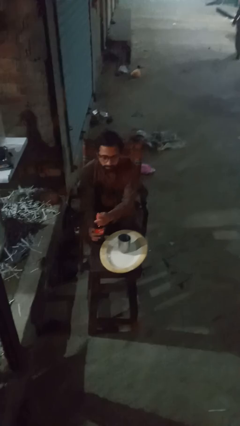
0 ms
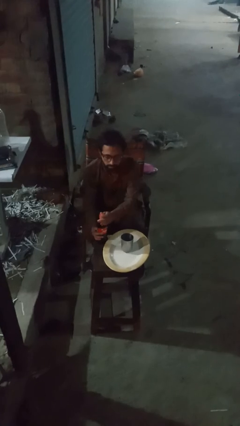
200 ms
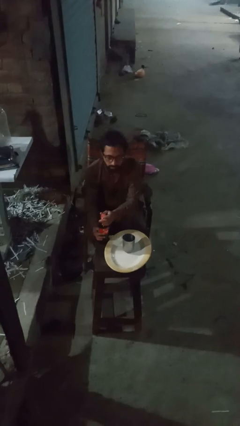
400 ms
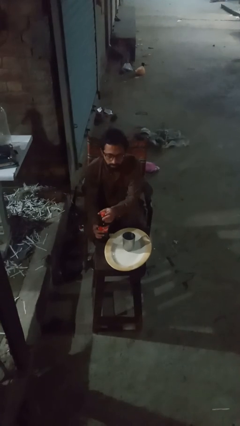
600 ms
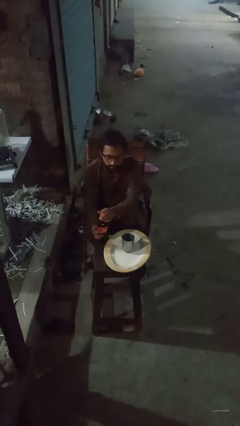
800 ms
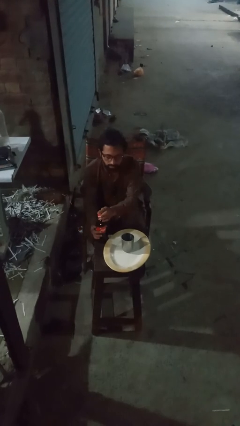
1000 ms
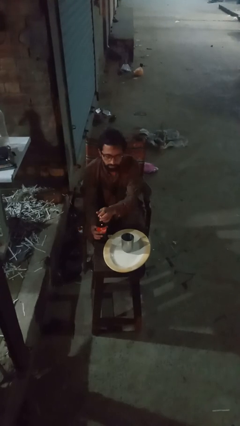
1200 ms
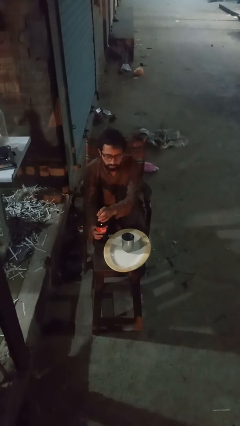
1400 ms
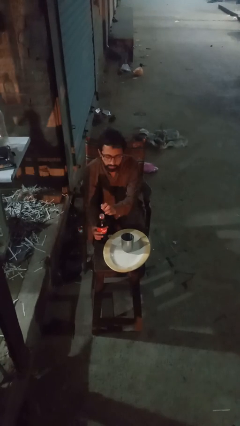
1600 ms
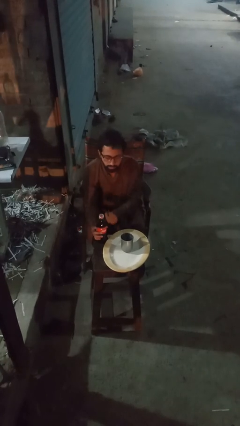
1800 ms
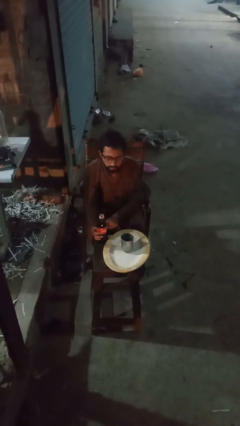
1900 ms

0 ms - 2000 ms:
person unscrews lid from bottle

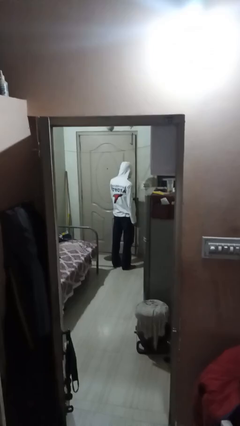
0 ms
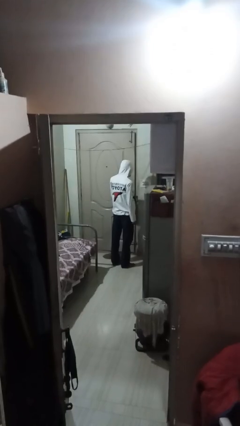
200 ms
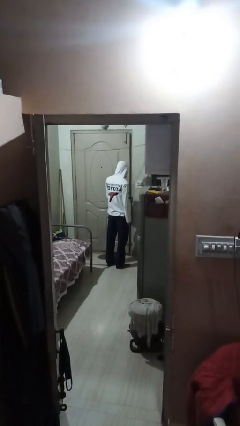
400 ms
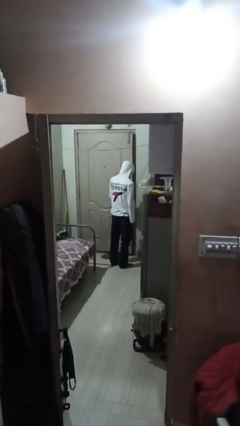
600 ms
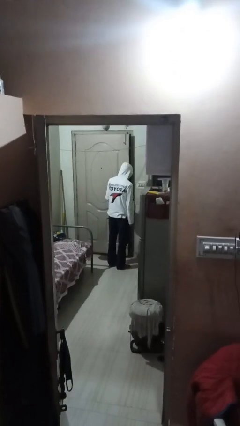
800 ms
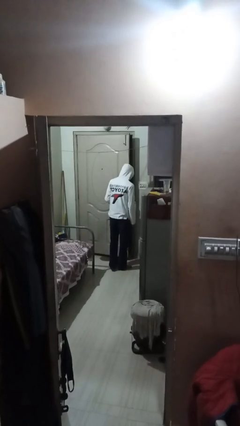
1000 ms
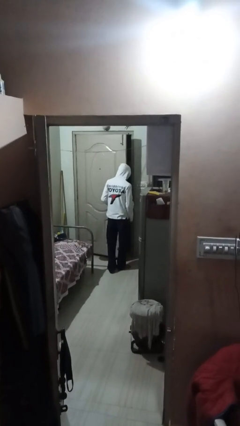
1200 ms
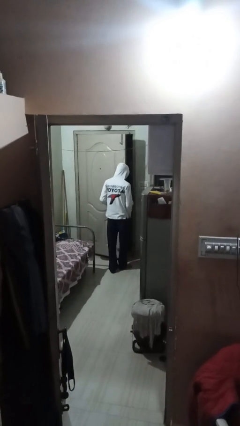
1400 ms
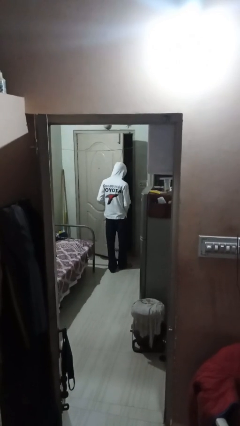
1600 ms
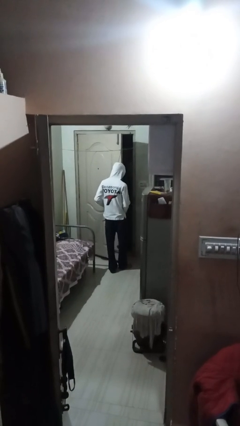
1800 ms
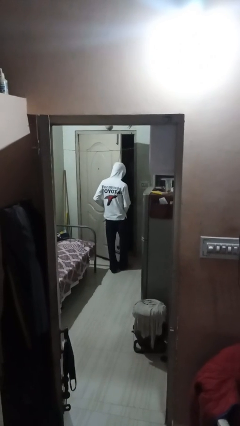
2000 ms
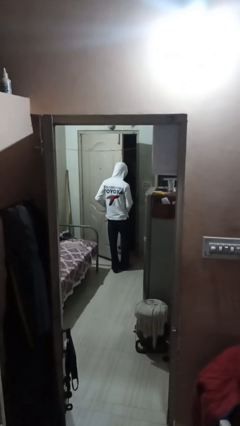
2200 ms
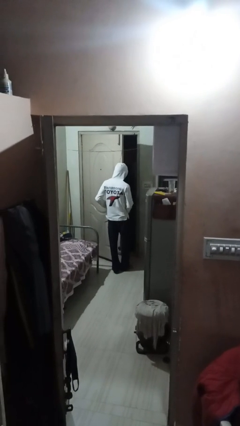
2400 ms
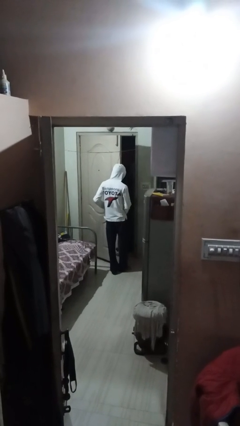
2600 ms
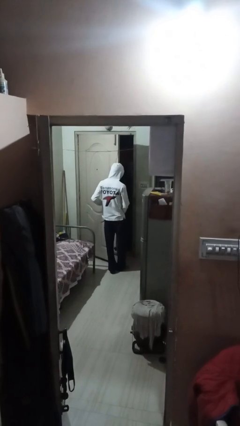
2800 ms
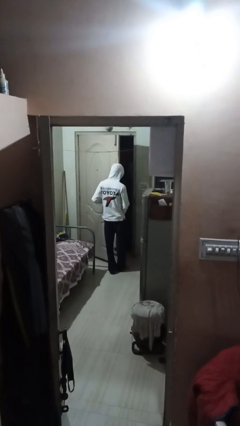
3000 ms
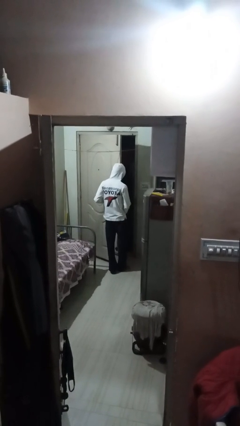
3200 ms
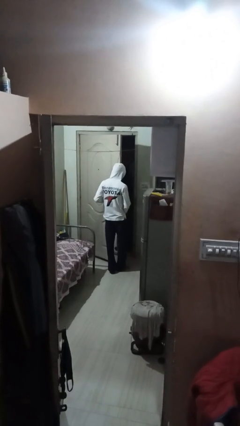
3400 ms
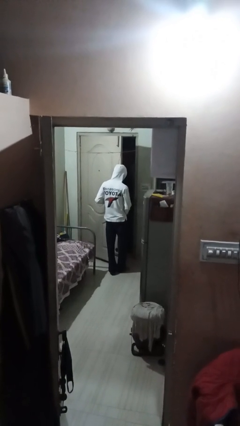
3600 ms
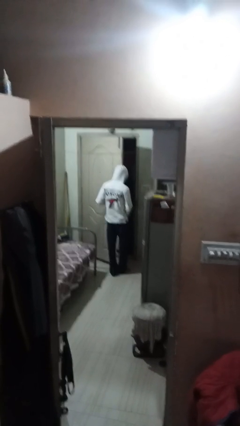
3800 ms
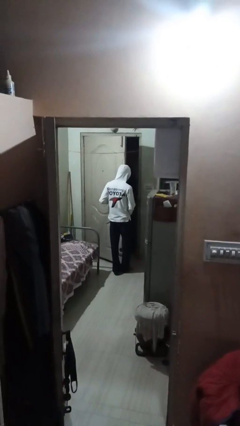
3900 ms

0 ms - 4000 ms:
person opens facility door

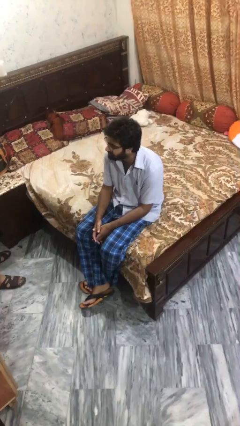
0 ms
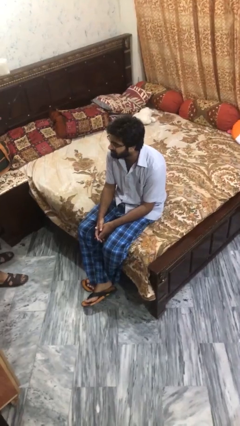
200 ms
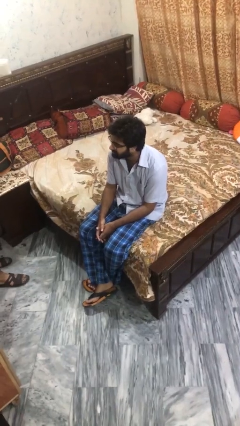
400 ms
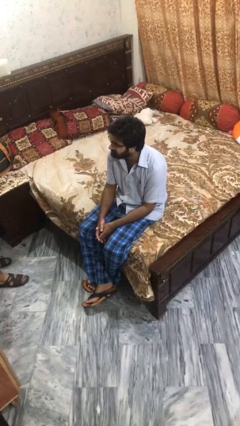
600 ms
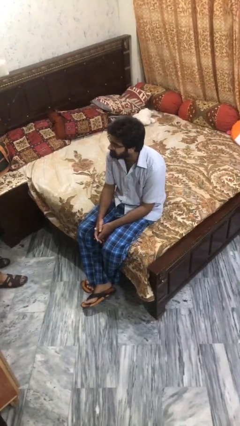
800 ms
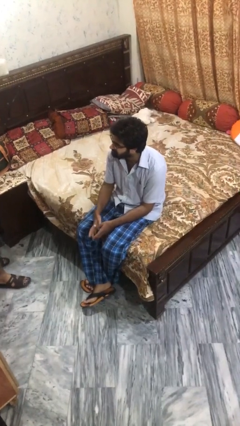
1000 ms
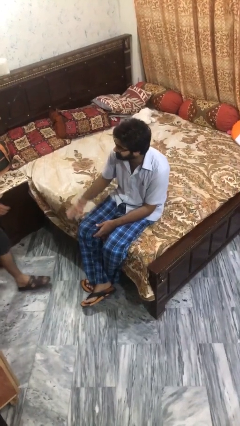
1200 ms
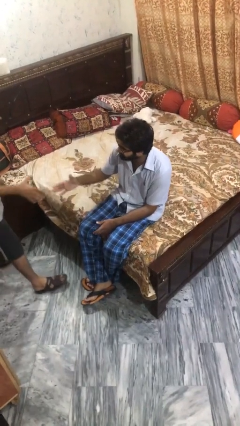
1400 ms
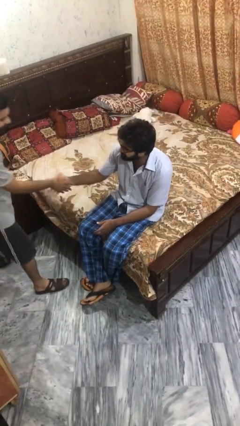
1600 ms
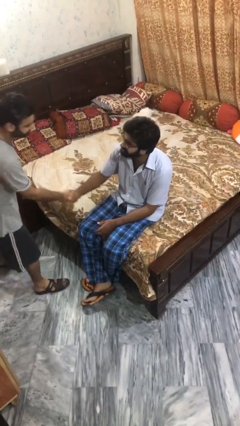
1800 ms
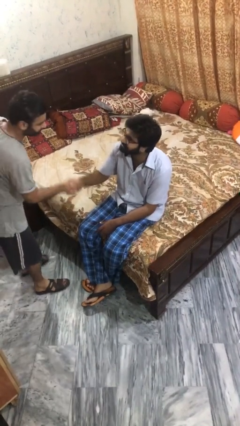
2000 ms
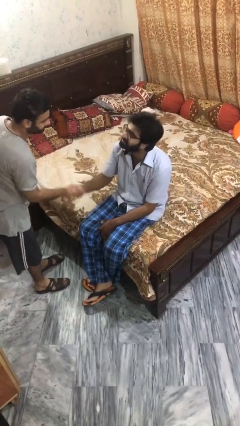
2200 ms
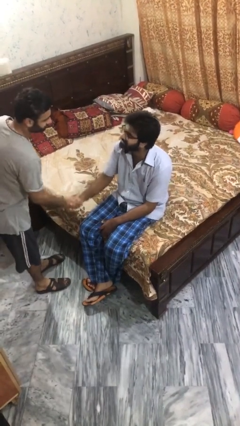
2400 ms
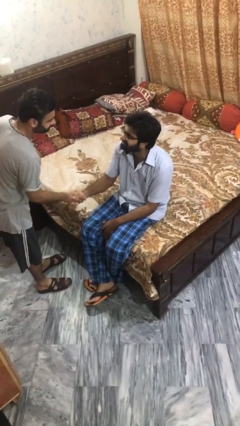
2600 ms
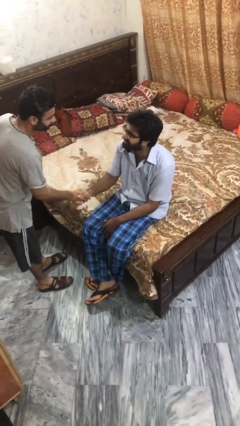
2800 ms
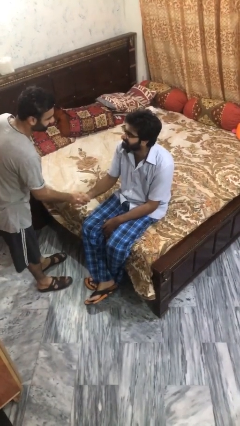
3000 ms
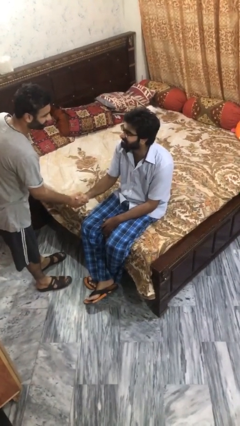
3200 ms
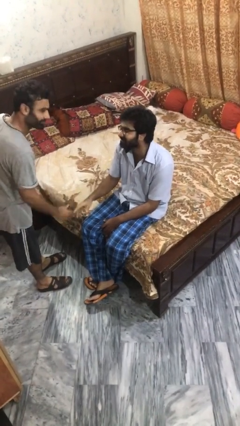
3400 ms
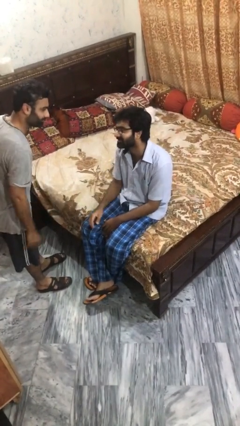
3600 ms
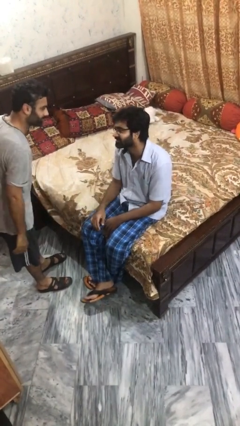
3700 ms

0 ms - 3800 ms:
person shakes hand

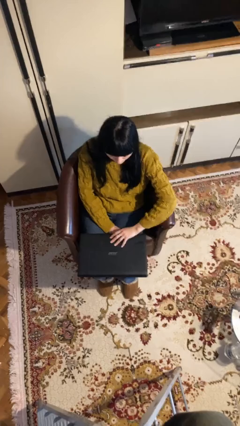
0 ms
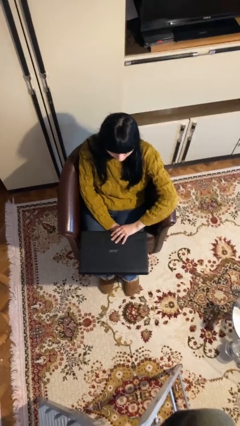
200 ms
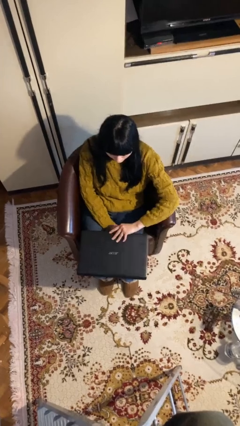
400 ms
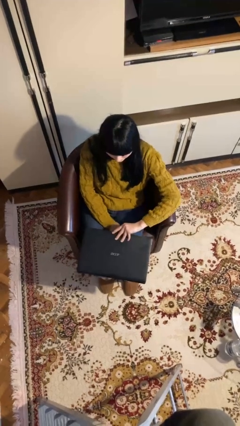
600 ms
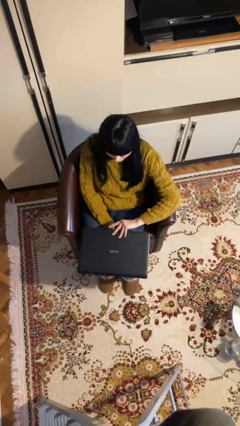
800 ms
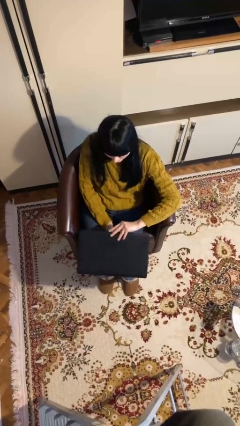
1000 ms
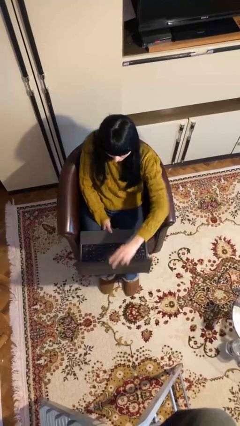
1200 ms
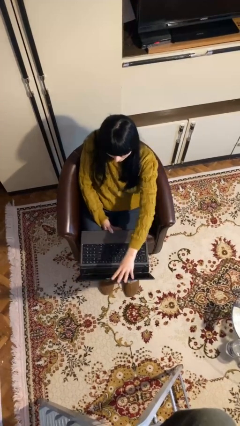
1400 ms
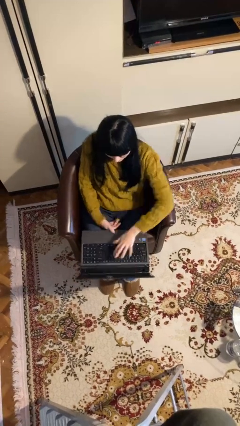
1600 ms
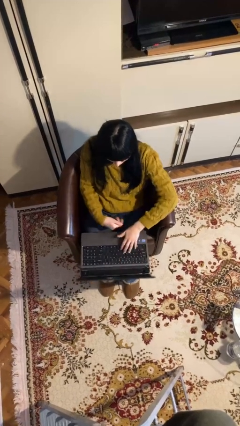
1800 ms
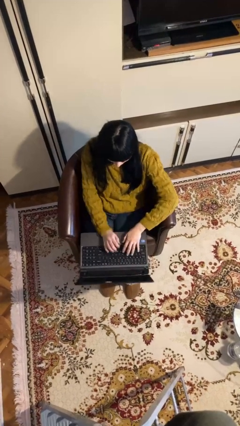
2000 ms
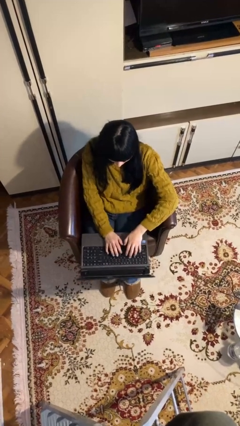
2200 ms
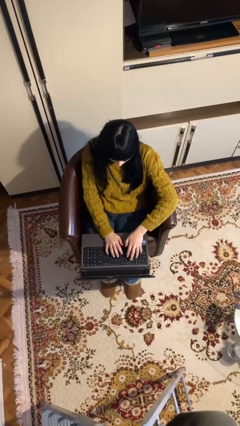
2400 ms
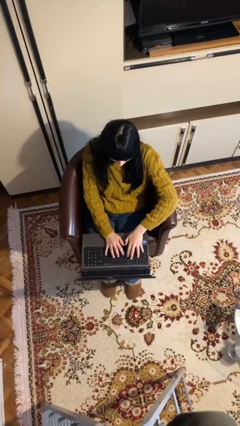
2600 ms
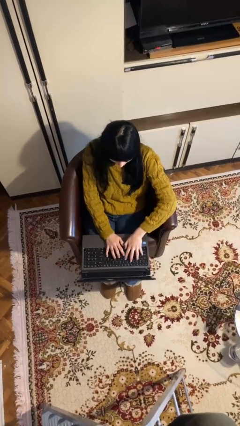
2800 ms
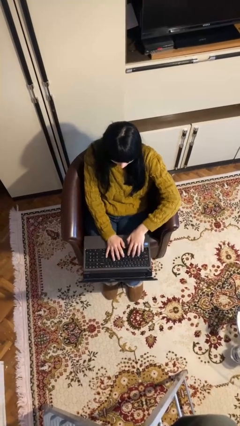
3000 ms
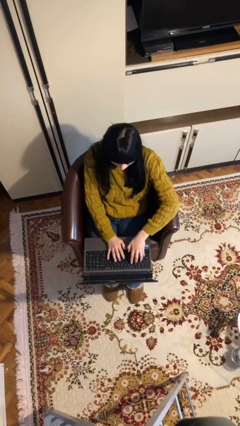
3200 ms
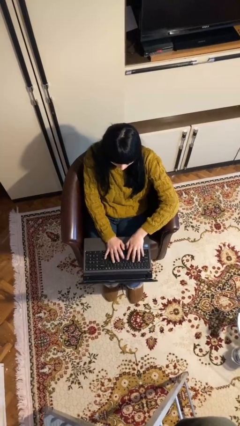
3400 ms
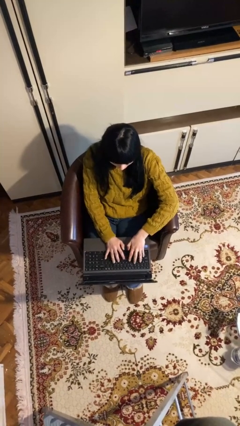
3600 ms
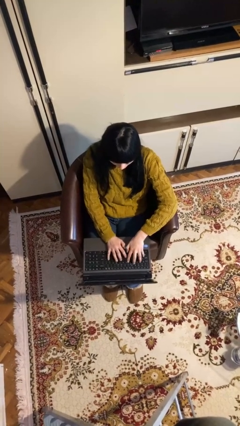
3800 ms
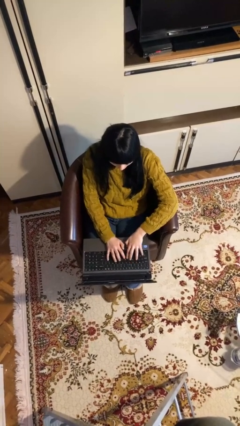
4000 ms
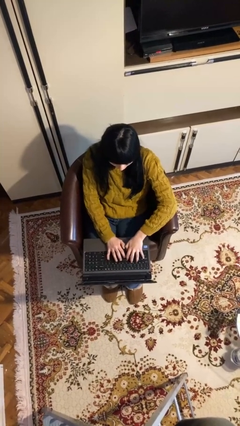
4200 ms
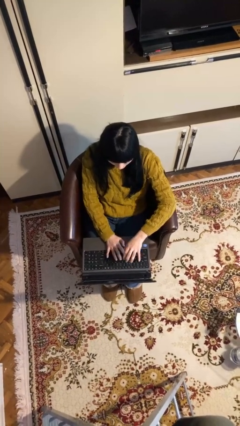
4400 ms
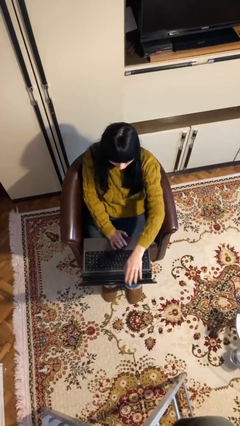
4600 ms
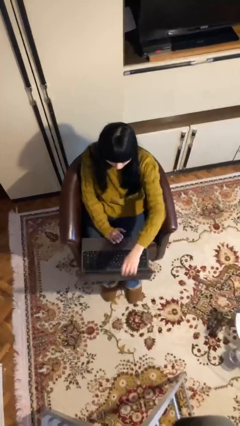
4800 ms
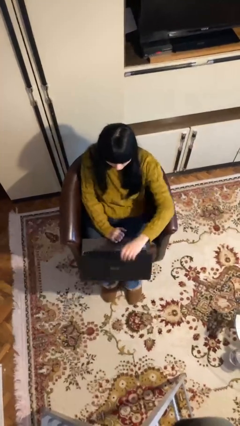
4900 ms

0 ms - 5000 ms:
person interacts with laptop

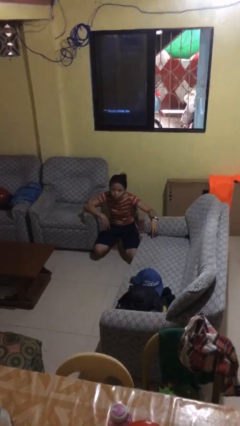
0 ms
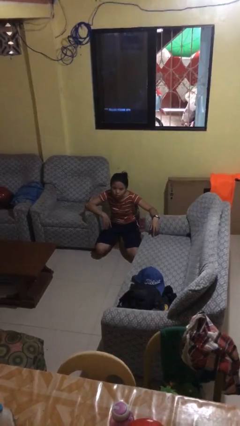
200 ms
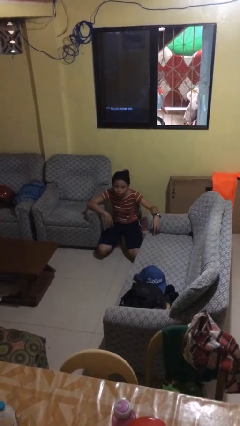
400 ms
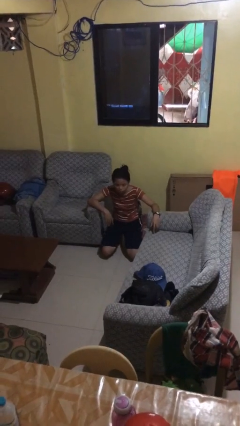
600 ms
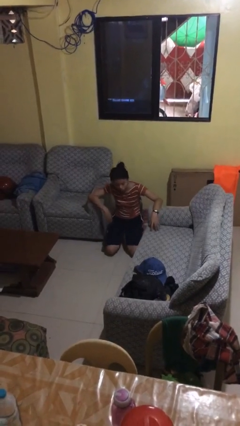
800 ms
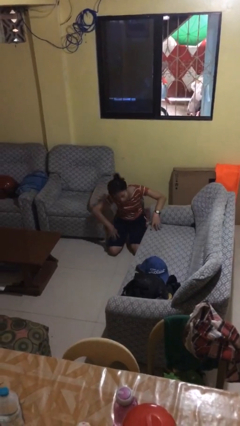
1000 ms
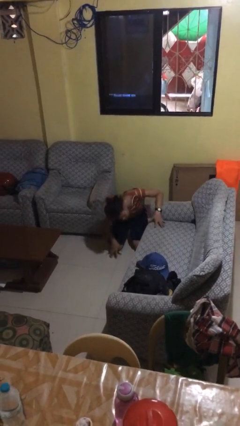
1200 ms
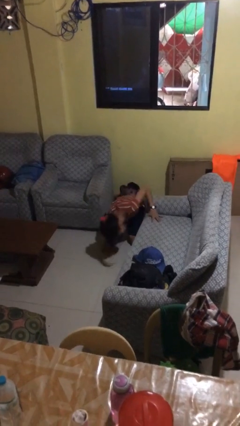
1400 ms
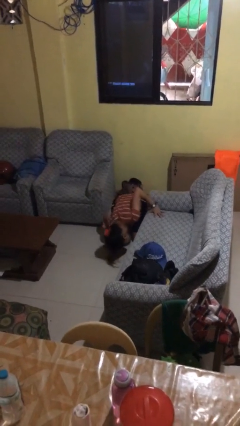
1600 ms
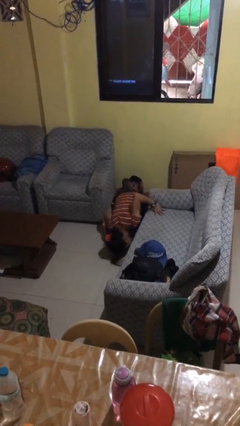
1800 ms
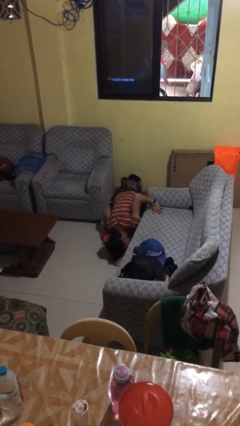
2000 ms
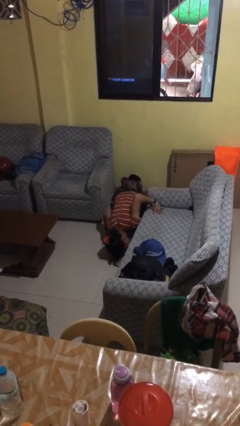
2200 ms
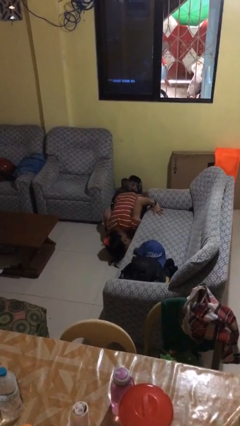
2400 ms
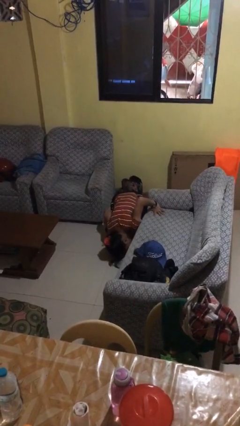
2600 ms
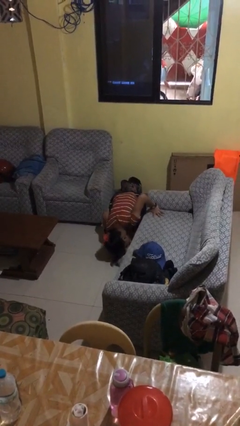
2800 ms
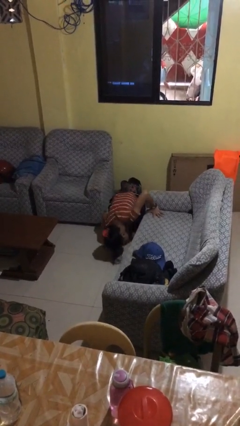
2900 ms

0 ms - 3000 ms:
person searches under couch
